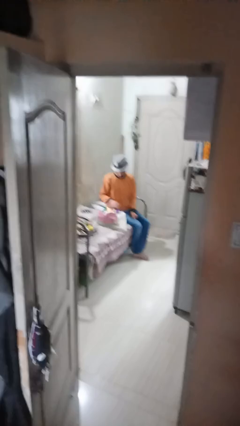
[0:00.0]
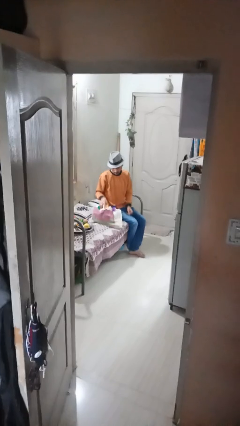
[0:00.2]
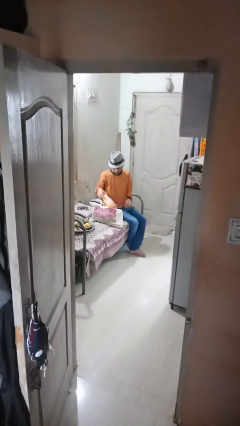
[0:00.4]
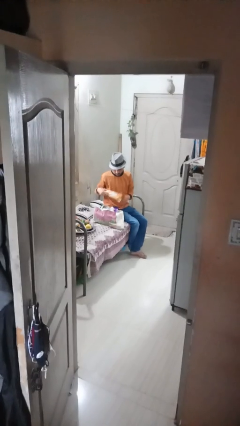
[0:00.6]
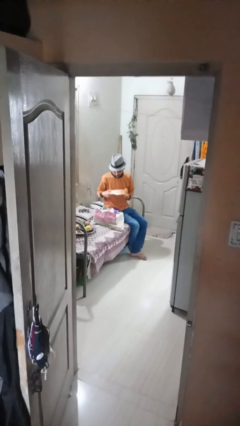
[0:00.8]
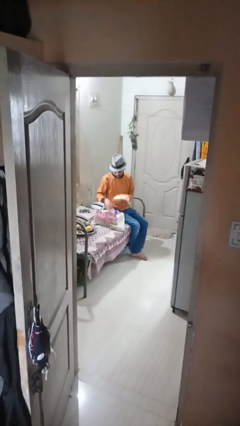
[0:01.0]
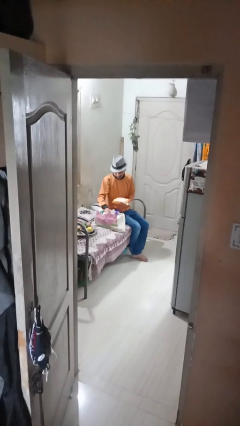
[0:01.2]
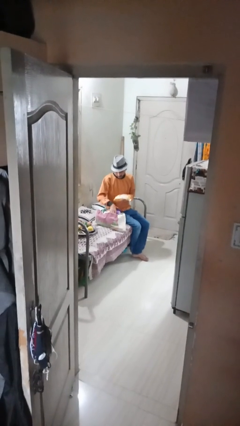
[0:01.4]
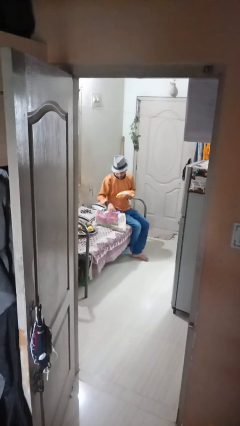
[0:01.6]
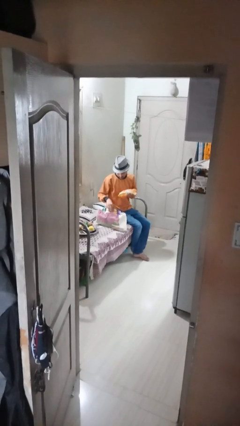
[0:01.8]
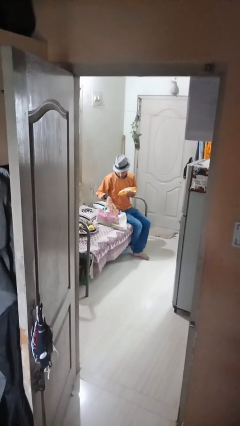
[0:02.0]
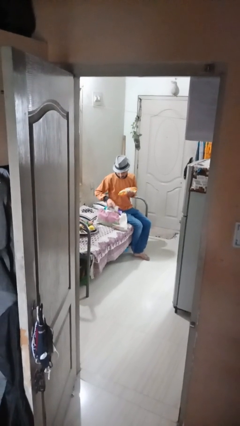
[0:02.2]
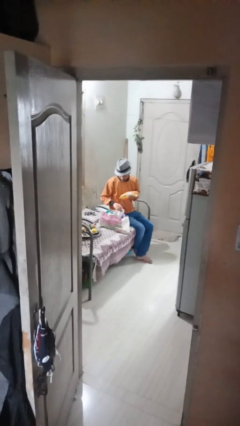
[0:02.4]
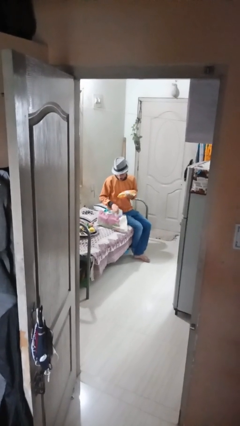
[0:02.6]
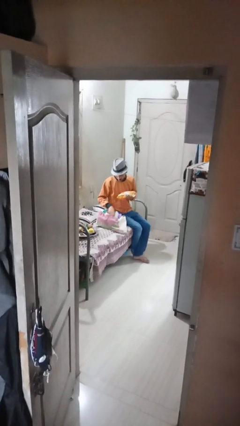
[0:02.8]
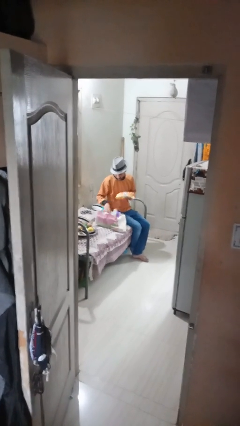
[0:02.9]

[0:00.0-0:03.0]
person searches in bag

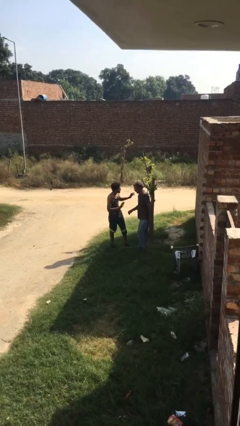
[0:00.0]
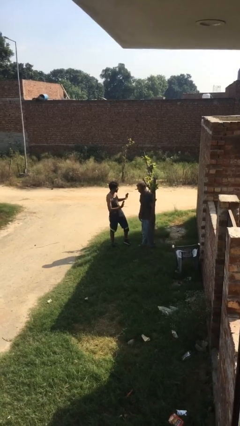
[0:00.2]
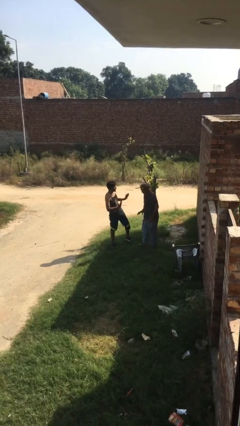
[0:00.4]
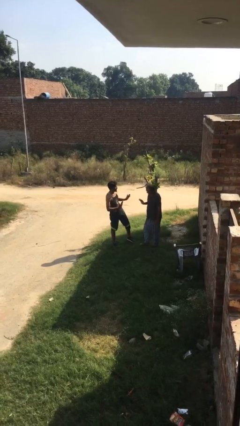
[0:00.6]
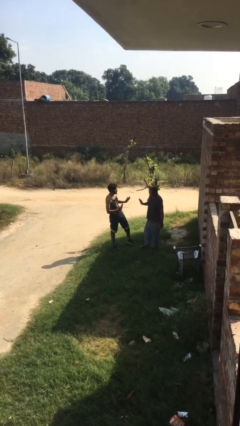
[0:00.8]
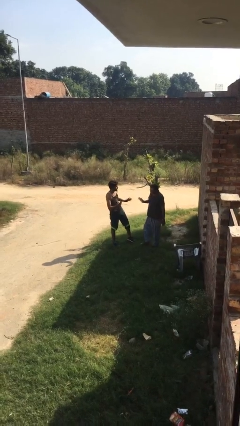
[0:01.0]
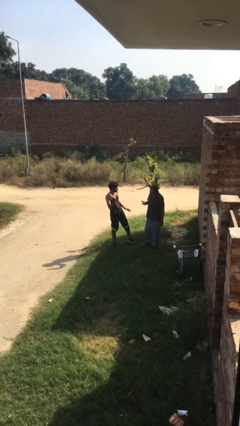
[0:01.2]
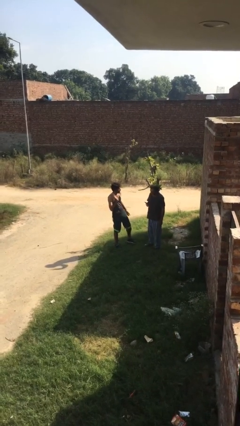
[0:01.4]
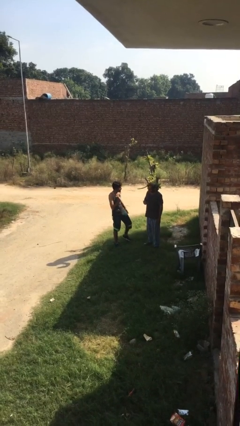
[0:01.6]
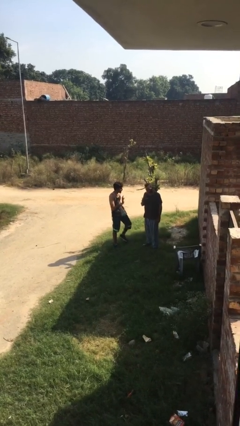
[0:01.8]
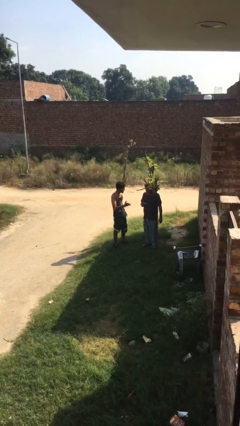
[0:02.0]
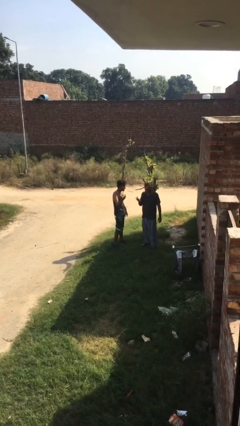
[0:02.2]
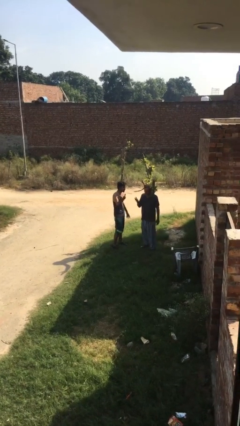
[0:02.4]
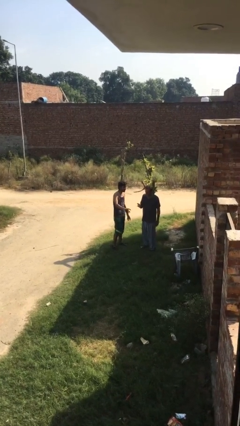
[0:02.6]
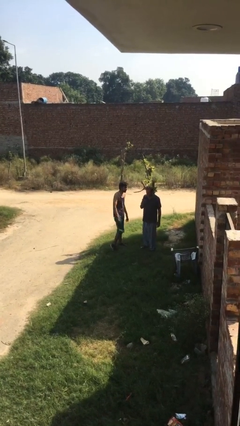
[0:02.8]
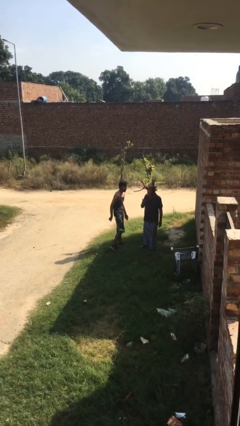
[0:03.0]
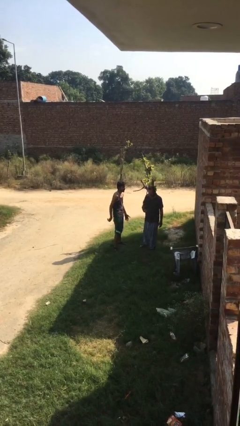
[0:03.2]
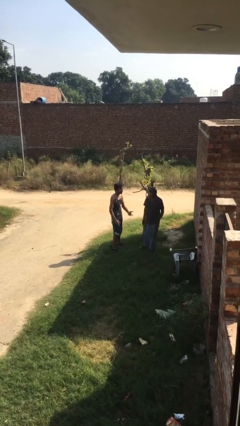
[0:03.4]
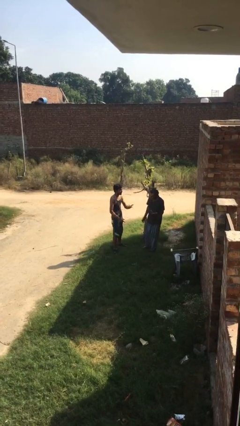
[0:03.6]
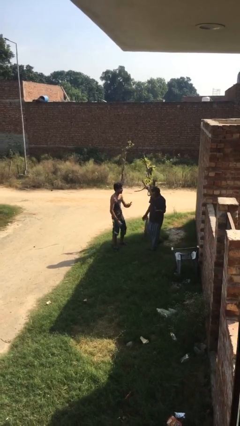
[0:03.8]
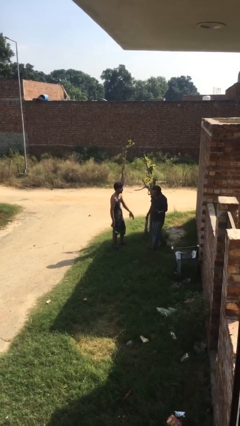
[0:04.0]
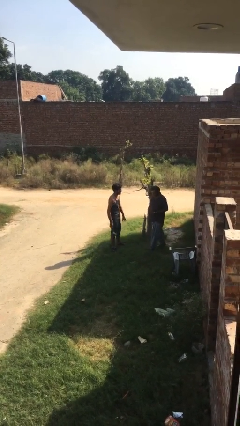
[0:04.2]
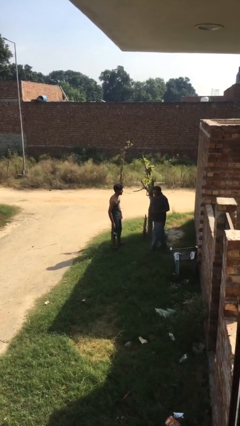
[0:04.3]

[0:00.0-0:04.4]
person talks to person

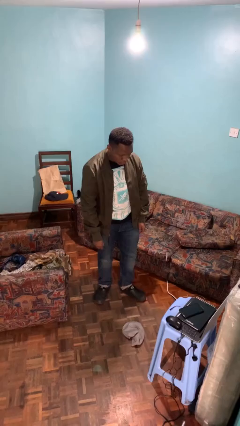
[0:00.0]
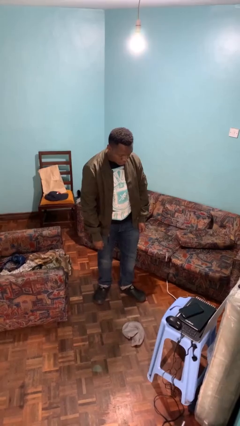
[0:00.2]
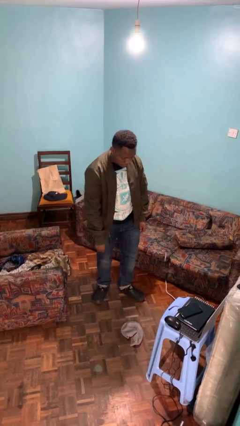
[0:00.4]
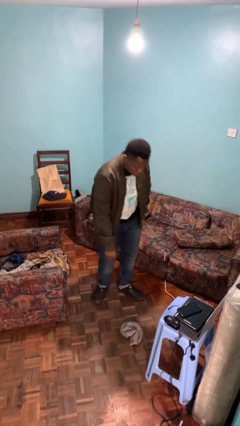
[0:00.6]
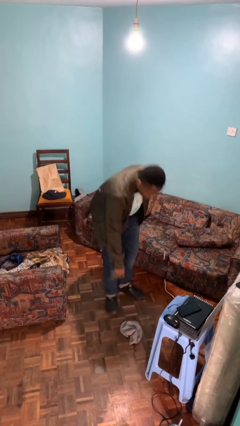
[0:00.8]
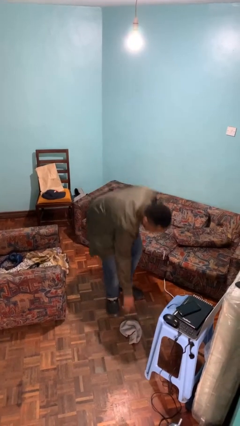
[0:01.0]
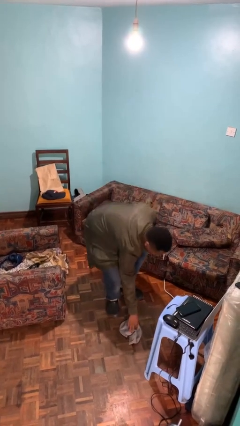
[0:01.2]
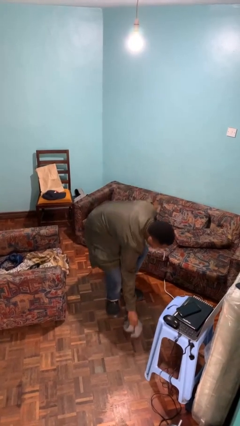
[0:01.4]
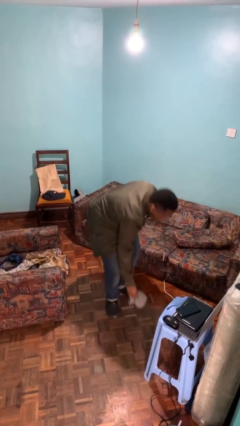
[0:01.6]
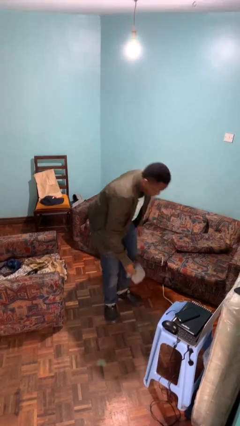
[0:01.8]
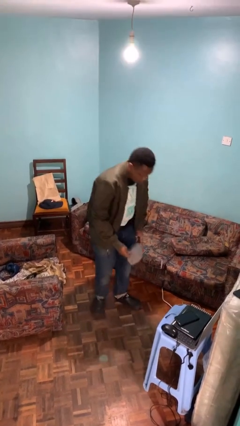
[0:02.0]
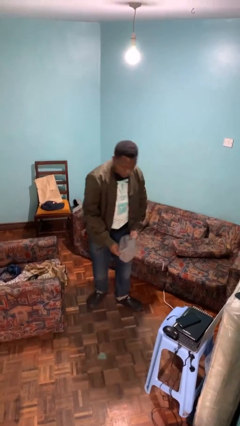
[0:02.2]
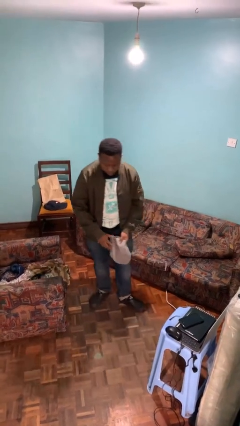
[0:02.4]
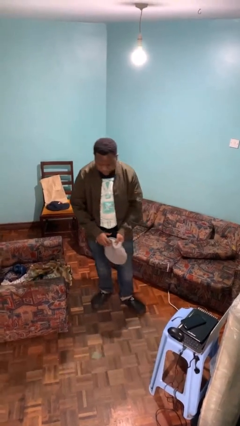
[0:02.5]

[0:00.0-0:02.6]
person picks up object from floor

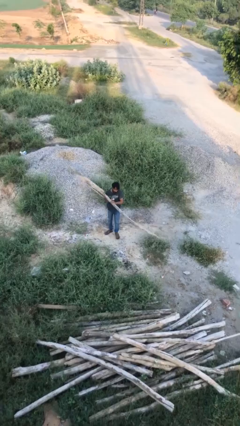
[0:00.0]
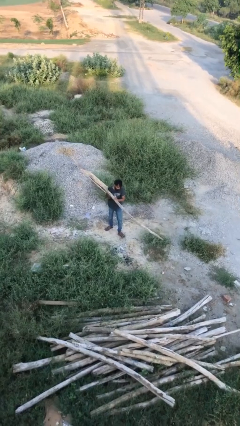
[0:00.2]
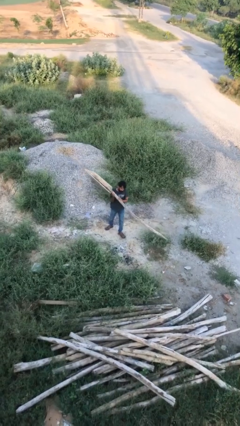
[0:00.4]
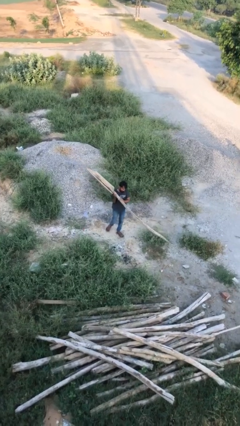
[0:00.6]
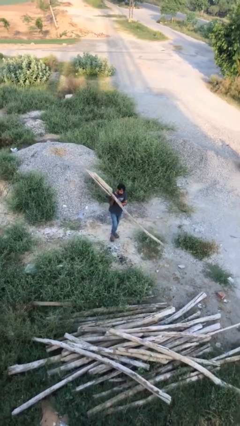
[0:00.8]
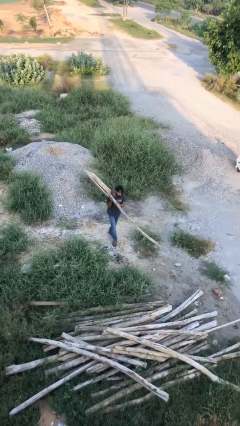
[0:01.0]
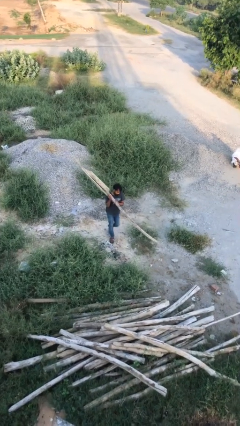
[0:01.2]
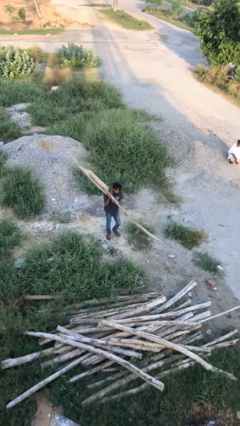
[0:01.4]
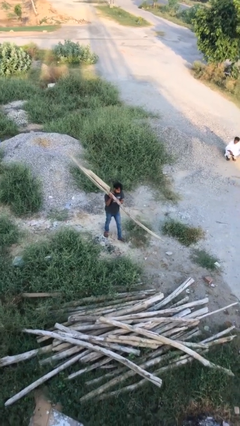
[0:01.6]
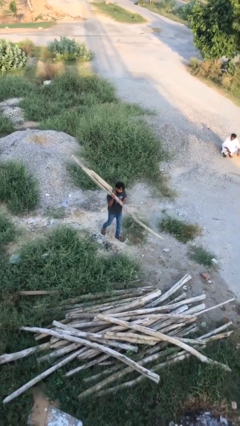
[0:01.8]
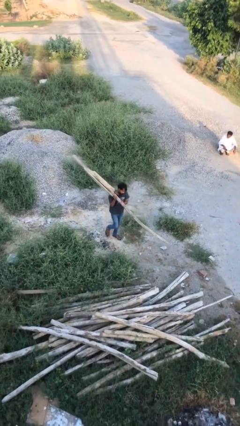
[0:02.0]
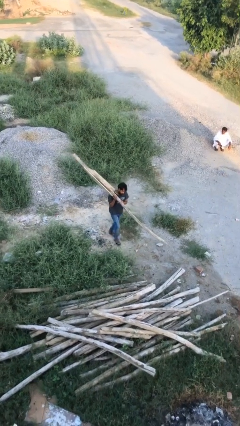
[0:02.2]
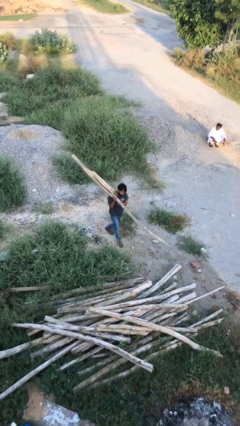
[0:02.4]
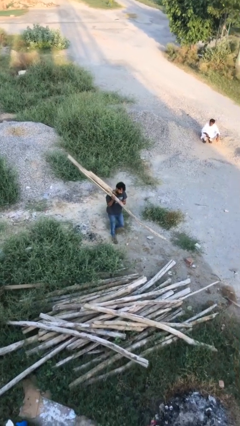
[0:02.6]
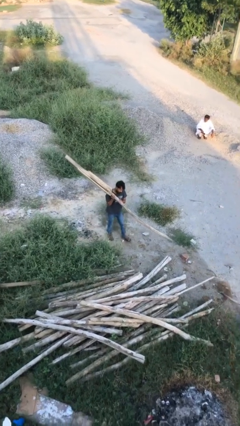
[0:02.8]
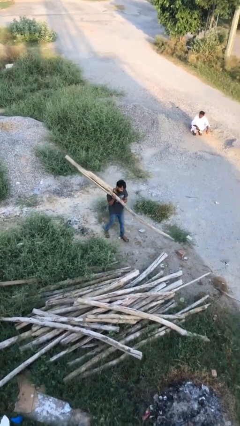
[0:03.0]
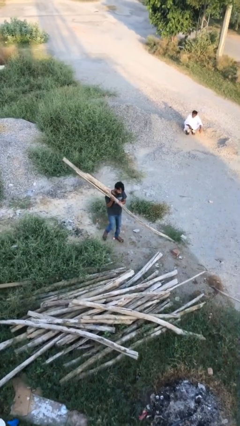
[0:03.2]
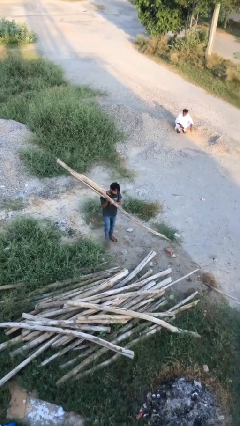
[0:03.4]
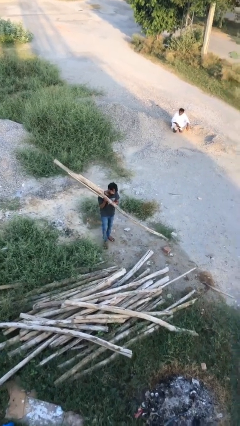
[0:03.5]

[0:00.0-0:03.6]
person carries heavy object

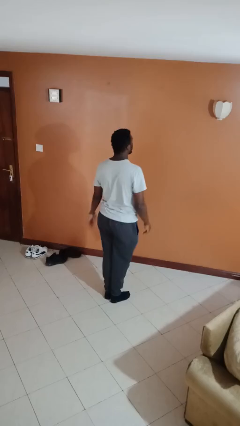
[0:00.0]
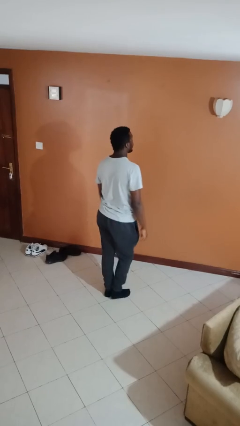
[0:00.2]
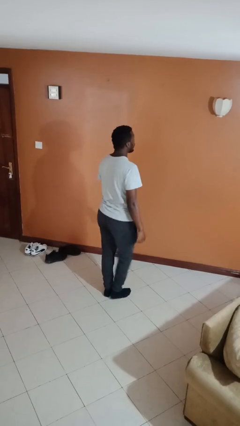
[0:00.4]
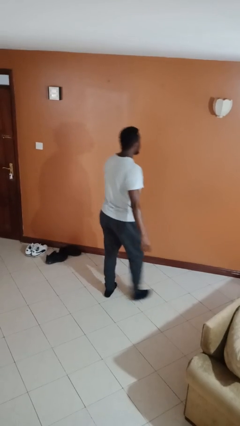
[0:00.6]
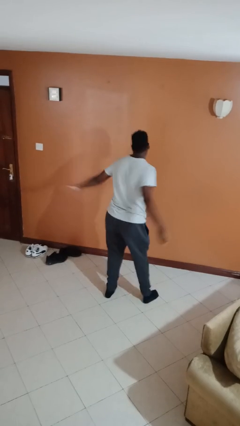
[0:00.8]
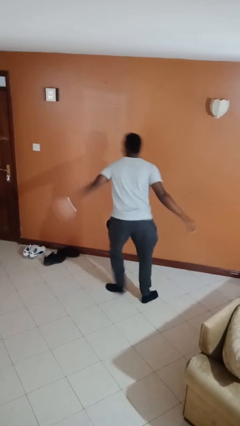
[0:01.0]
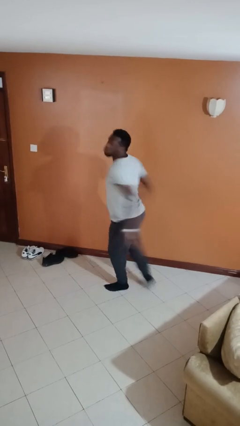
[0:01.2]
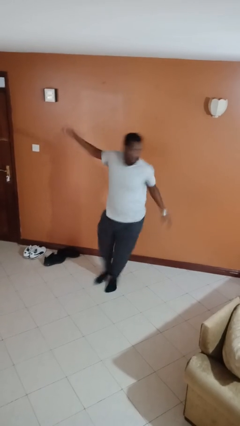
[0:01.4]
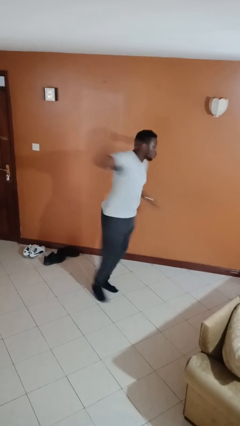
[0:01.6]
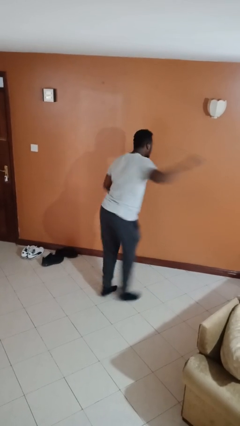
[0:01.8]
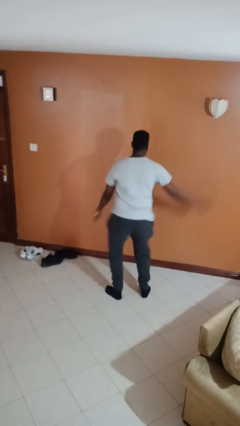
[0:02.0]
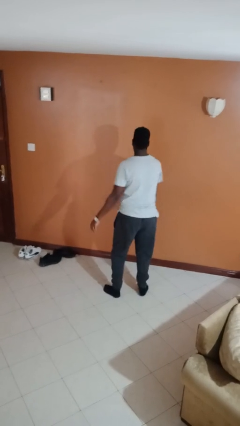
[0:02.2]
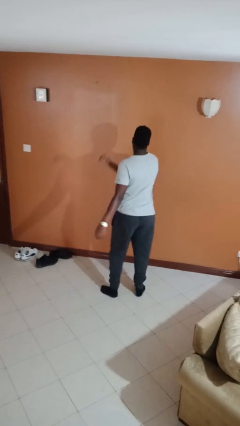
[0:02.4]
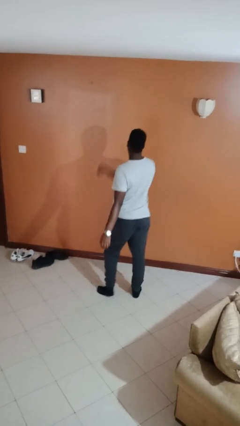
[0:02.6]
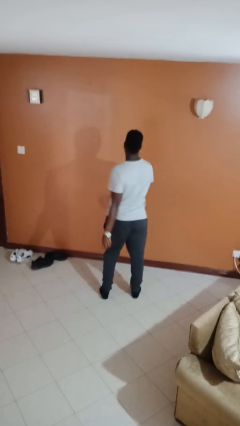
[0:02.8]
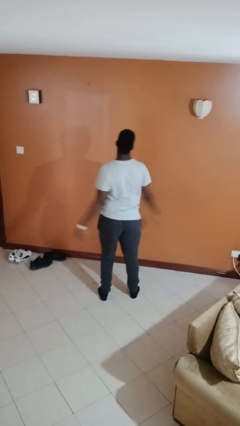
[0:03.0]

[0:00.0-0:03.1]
person twirls

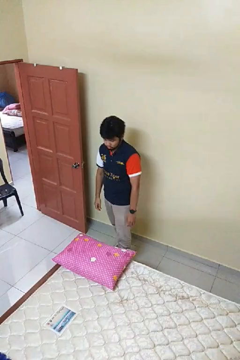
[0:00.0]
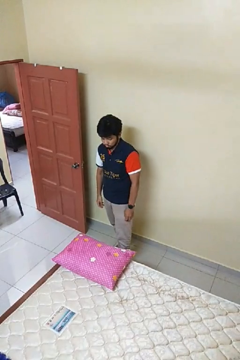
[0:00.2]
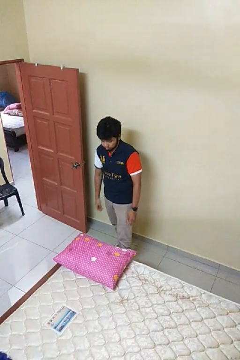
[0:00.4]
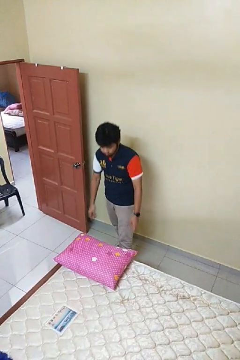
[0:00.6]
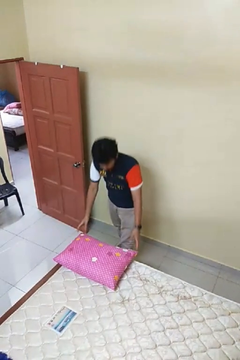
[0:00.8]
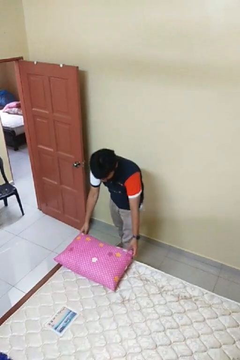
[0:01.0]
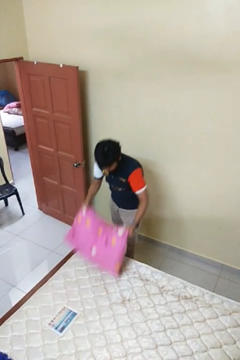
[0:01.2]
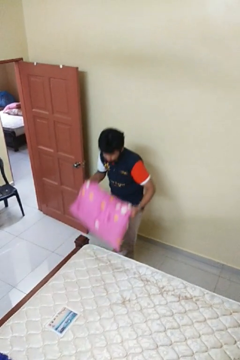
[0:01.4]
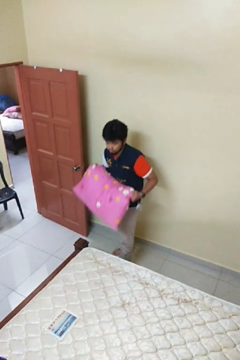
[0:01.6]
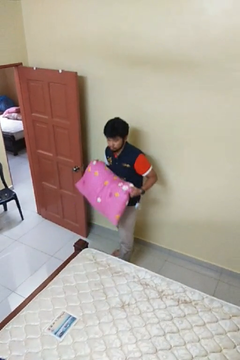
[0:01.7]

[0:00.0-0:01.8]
person picks up object from bed
